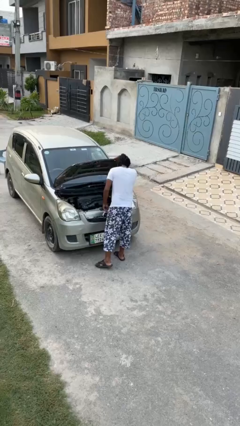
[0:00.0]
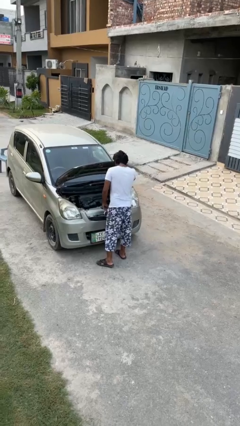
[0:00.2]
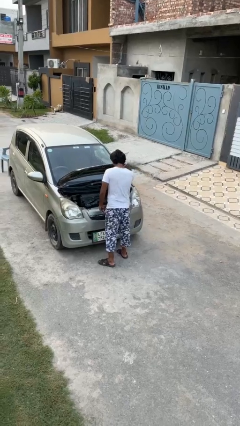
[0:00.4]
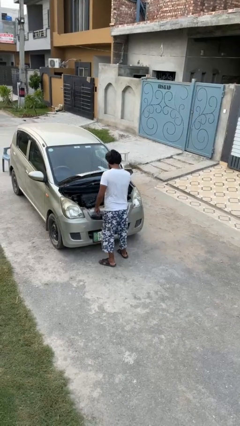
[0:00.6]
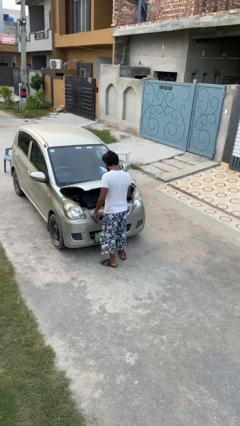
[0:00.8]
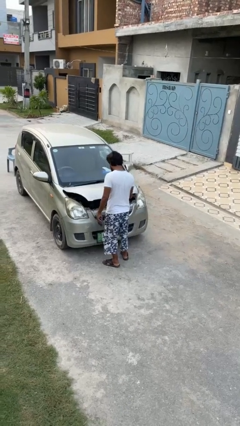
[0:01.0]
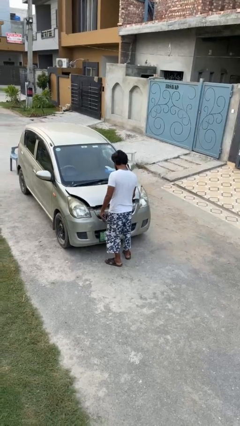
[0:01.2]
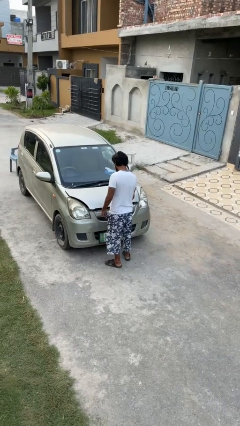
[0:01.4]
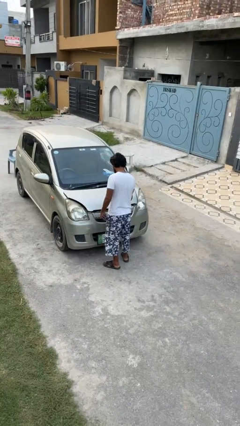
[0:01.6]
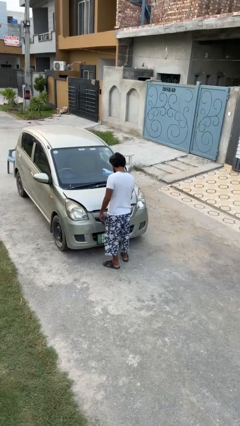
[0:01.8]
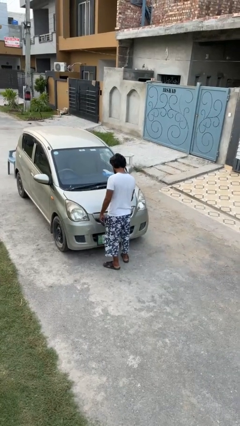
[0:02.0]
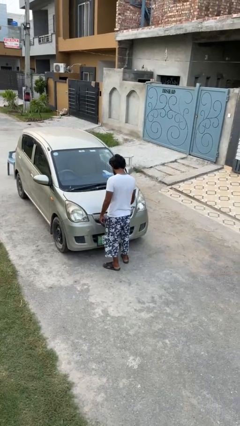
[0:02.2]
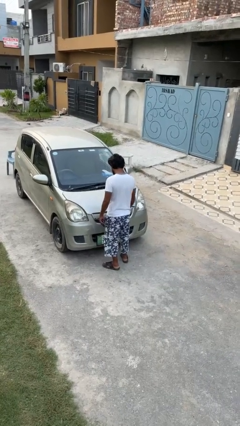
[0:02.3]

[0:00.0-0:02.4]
person closes car hood

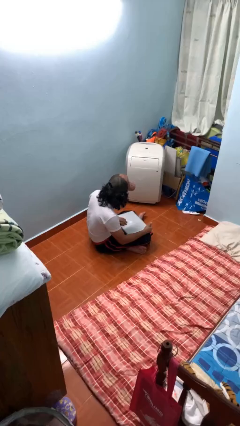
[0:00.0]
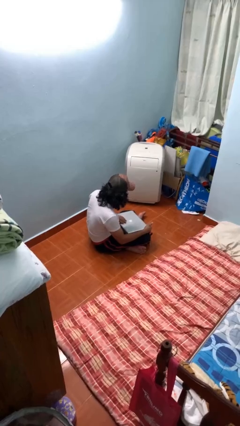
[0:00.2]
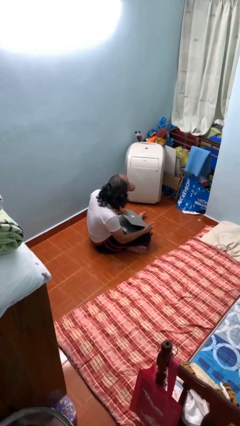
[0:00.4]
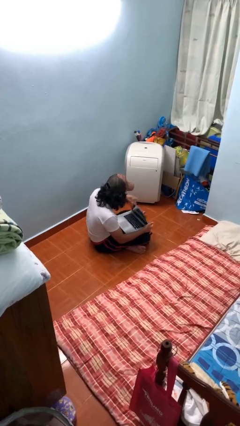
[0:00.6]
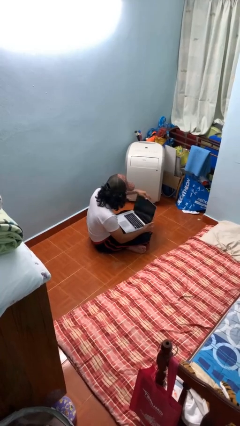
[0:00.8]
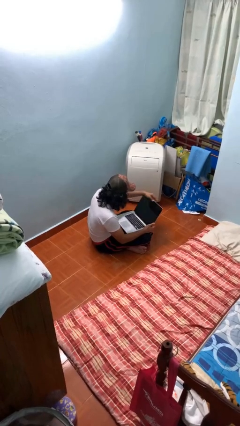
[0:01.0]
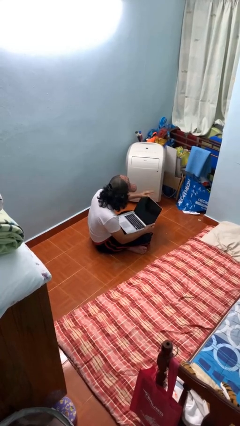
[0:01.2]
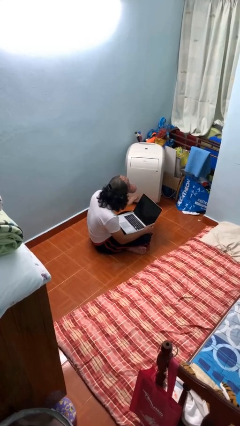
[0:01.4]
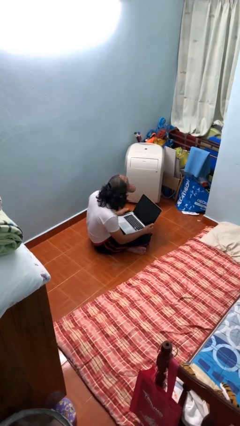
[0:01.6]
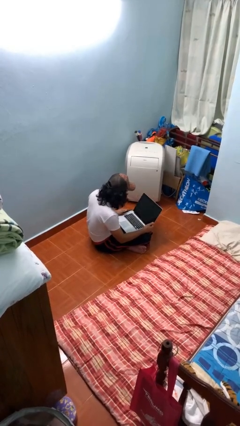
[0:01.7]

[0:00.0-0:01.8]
person opens laptop

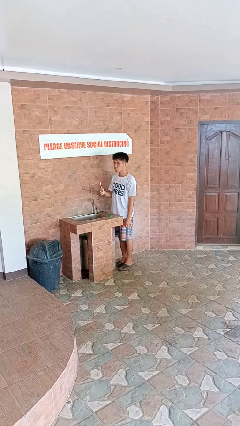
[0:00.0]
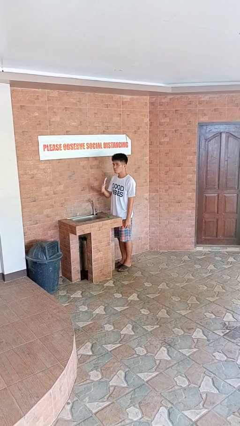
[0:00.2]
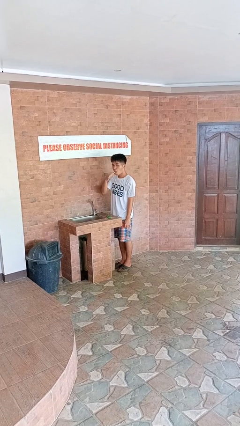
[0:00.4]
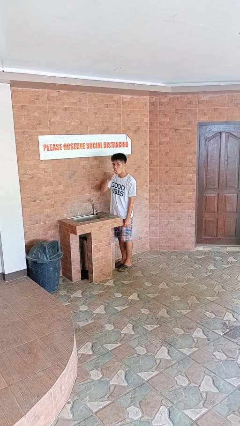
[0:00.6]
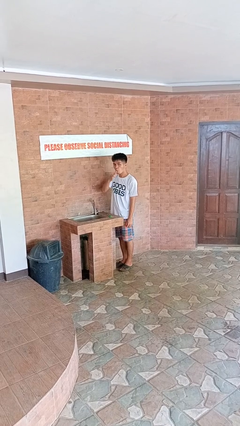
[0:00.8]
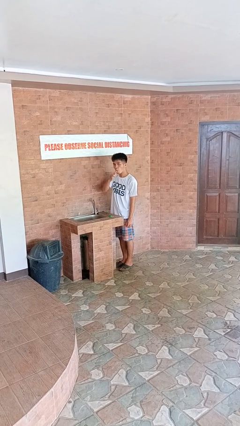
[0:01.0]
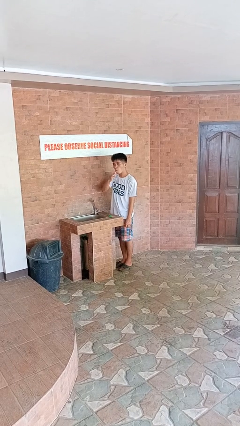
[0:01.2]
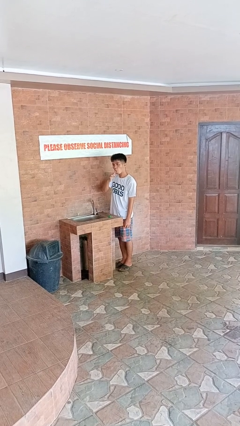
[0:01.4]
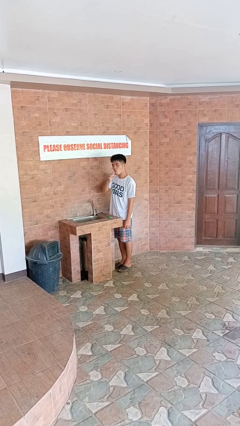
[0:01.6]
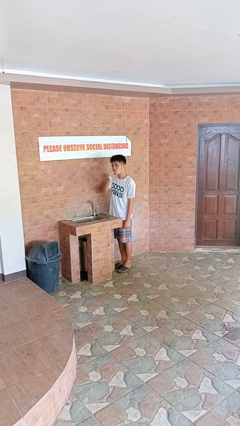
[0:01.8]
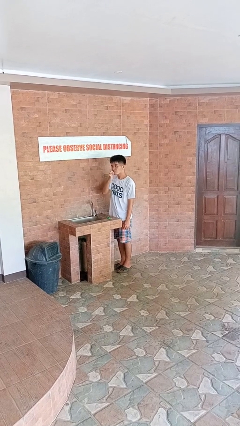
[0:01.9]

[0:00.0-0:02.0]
person brushes teeth

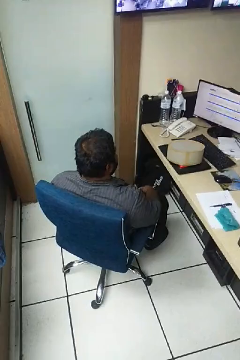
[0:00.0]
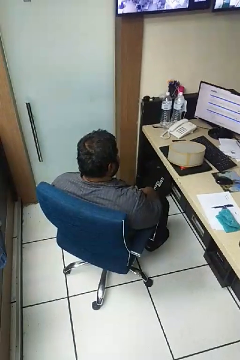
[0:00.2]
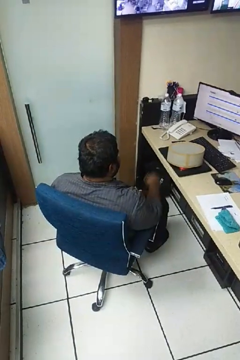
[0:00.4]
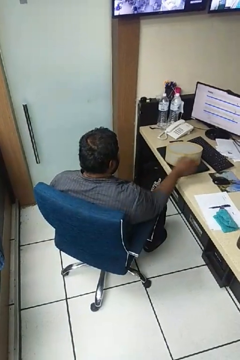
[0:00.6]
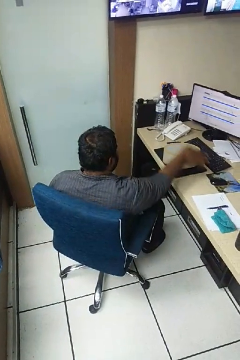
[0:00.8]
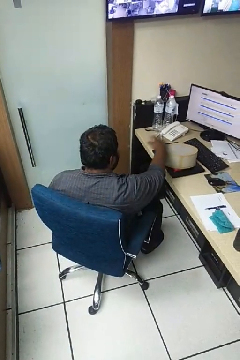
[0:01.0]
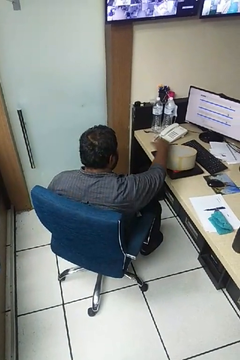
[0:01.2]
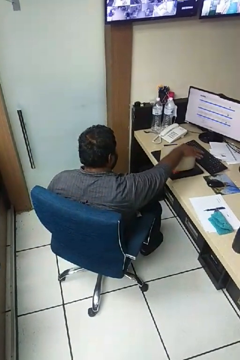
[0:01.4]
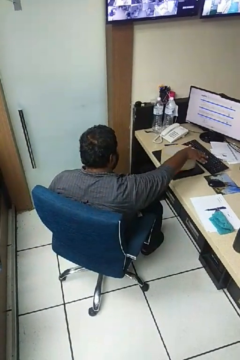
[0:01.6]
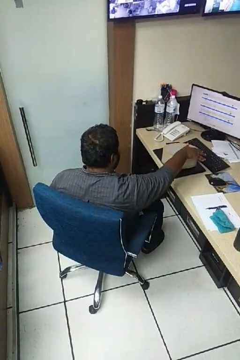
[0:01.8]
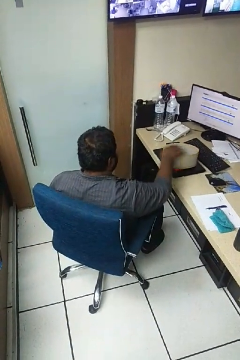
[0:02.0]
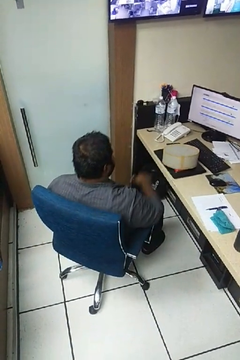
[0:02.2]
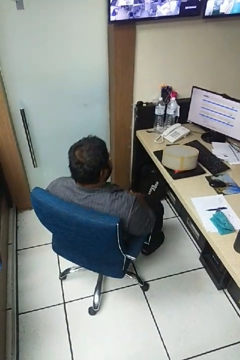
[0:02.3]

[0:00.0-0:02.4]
person waves hand over object

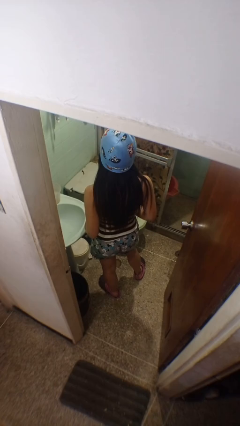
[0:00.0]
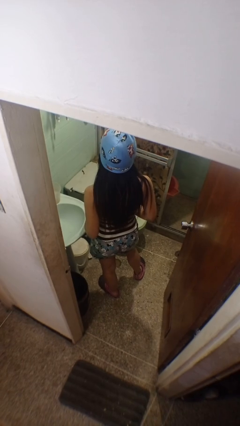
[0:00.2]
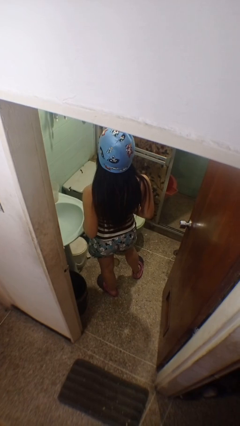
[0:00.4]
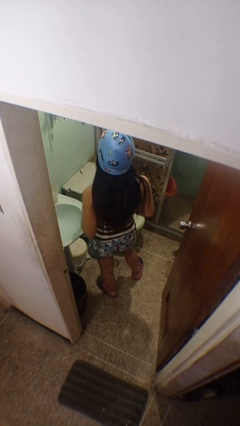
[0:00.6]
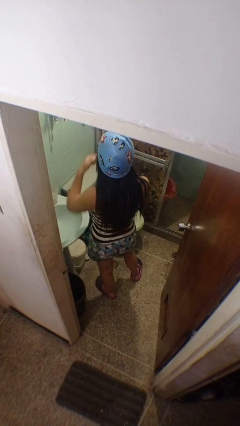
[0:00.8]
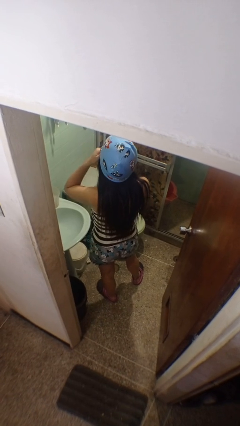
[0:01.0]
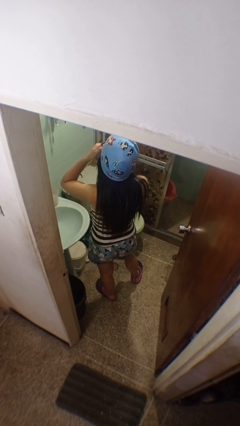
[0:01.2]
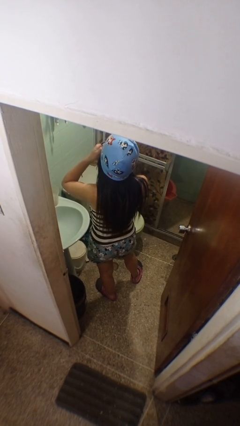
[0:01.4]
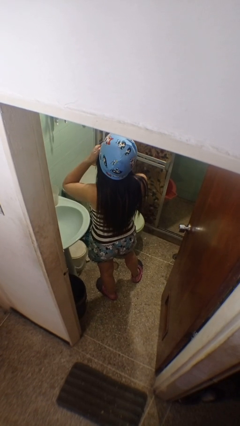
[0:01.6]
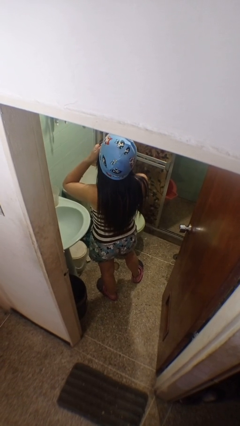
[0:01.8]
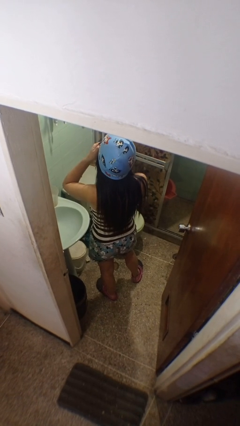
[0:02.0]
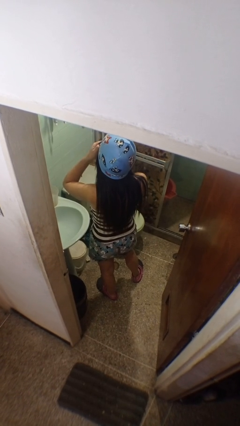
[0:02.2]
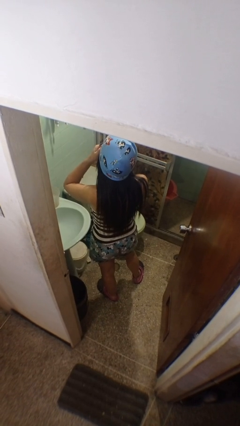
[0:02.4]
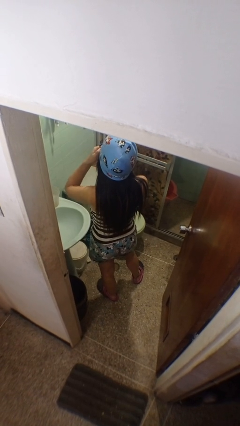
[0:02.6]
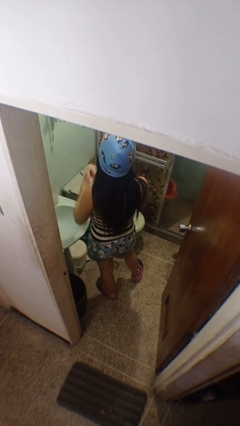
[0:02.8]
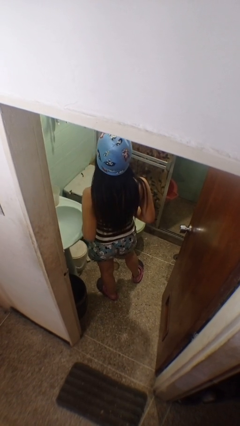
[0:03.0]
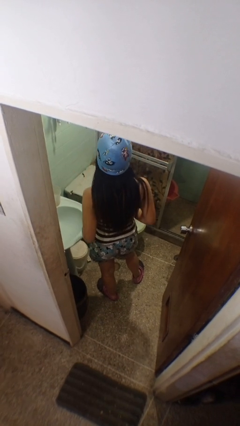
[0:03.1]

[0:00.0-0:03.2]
person flosses

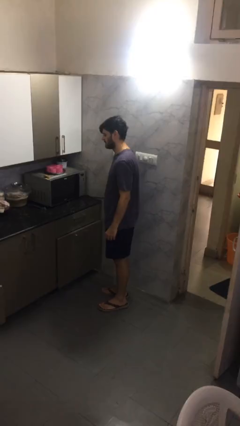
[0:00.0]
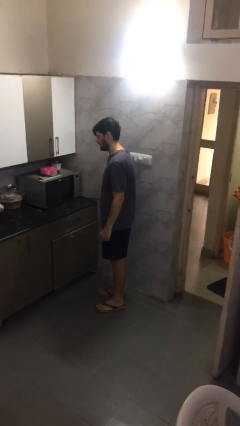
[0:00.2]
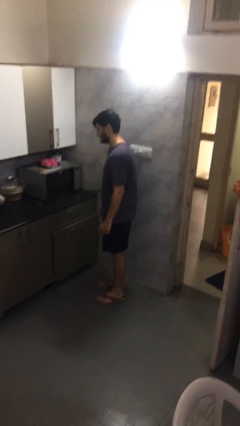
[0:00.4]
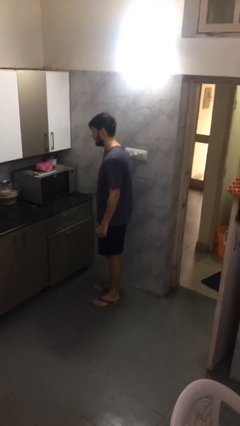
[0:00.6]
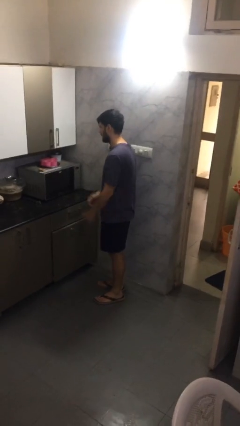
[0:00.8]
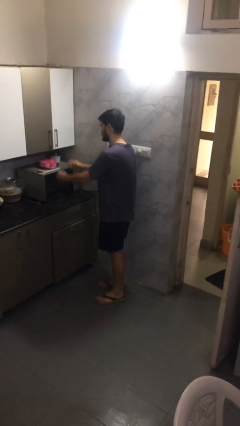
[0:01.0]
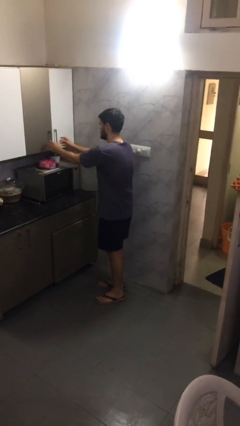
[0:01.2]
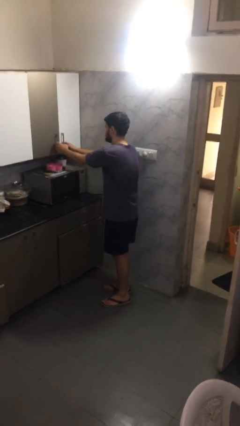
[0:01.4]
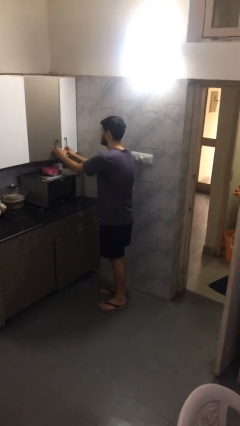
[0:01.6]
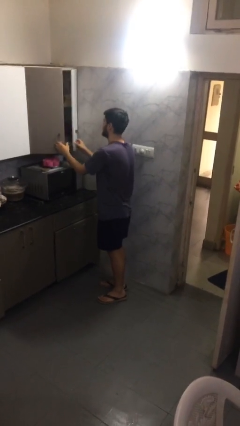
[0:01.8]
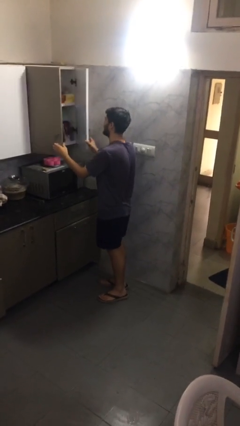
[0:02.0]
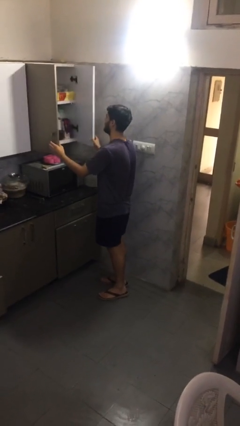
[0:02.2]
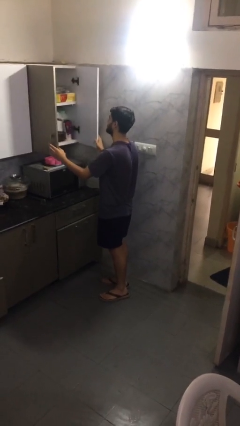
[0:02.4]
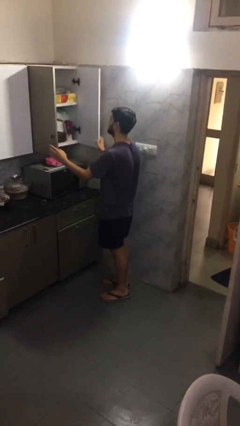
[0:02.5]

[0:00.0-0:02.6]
person opens cabinet

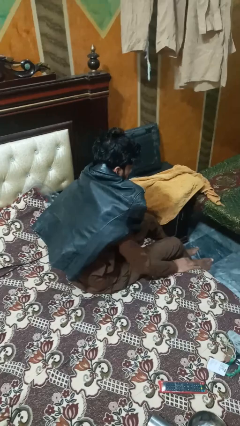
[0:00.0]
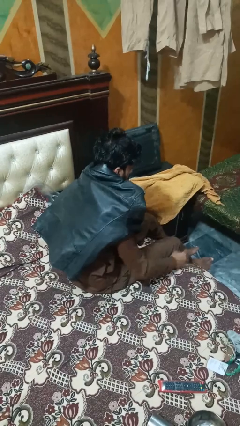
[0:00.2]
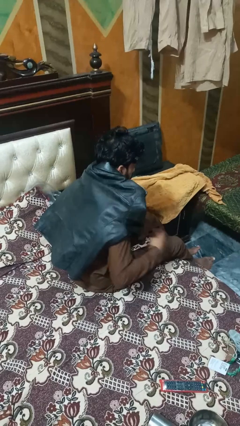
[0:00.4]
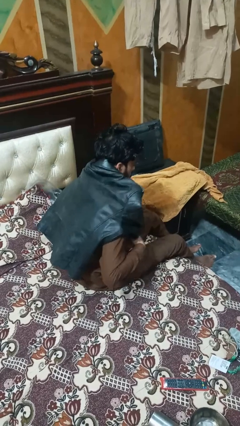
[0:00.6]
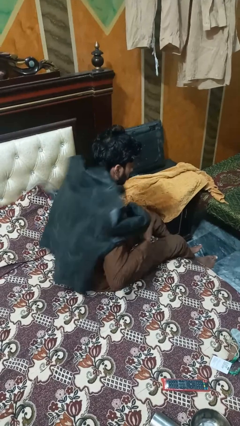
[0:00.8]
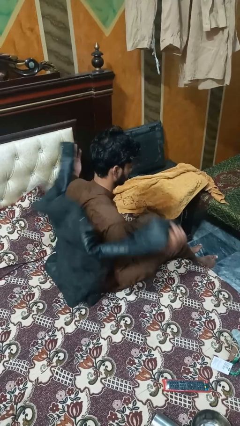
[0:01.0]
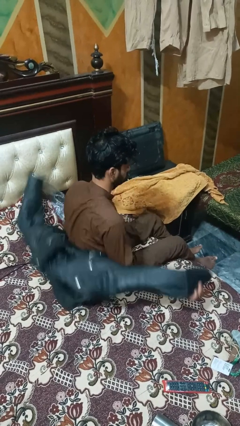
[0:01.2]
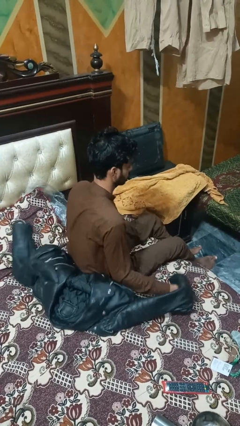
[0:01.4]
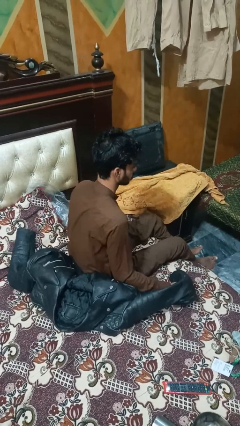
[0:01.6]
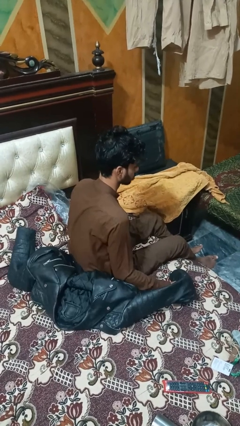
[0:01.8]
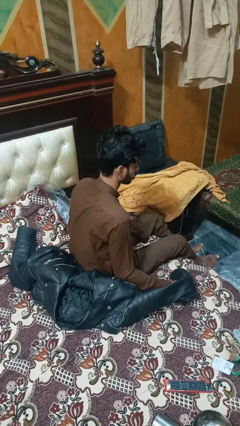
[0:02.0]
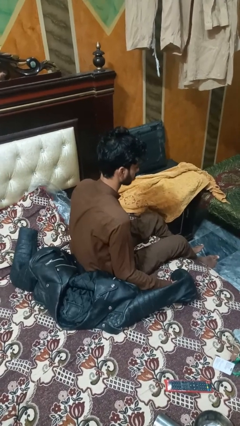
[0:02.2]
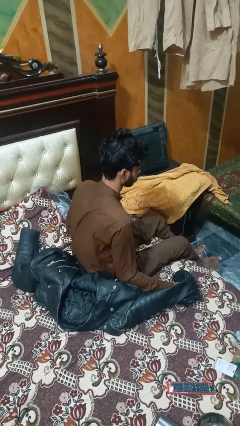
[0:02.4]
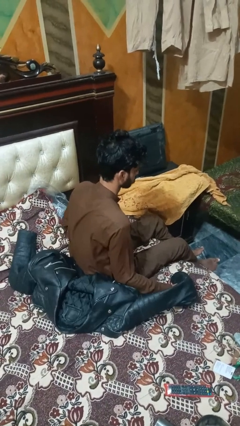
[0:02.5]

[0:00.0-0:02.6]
person unties jacket around waist

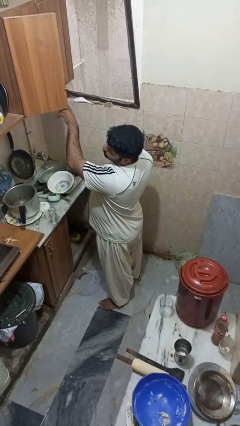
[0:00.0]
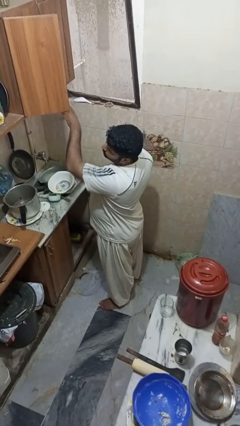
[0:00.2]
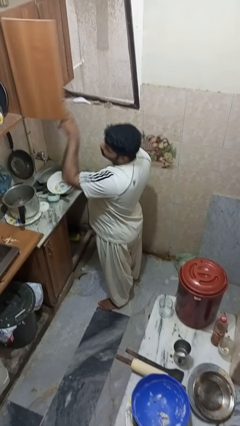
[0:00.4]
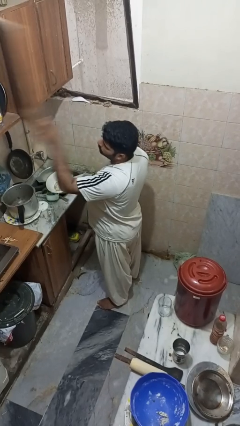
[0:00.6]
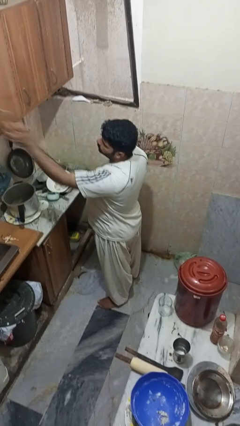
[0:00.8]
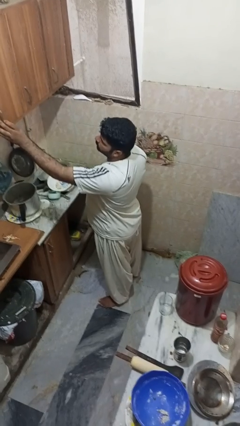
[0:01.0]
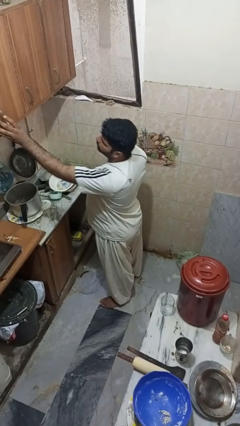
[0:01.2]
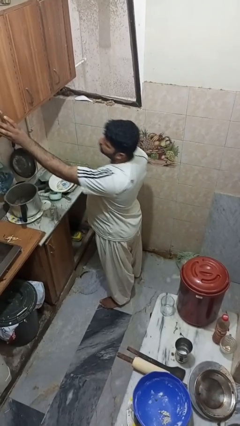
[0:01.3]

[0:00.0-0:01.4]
person closes cabinet
